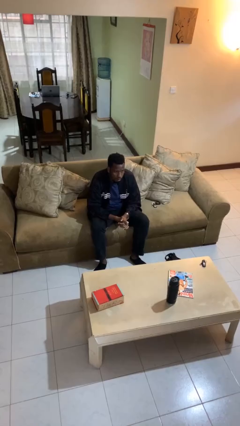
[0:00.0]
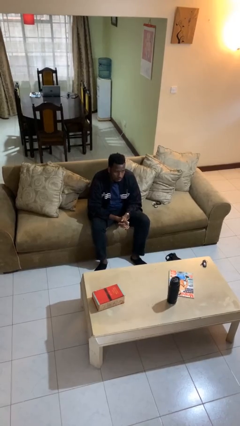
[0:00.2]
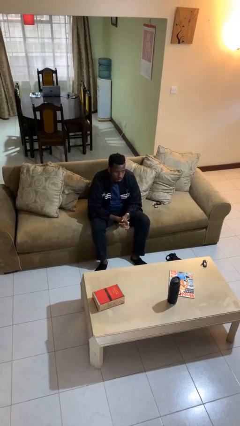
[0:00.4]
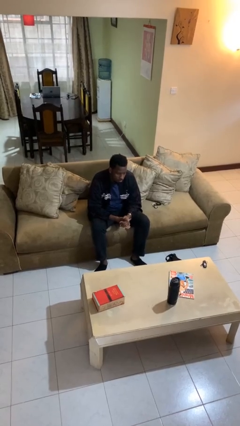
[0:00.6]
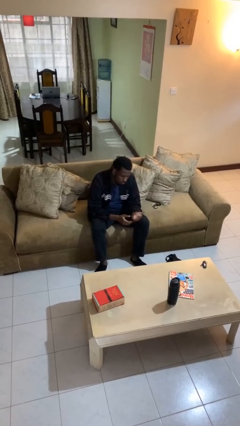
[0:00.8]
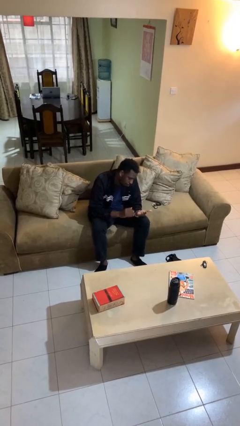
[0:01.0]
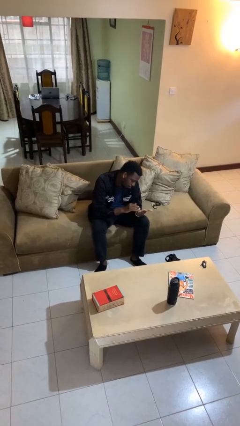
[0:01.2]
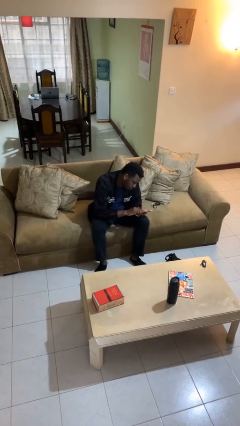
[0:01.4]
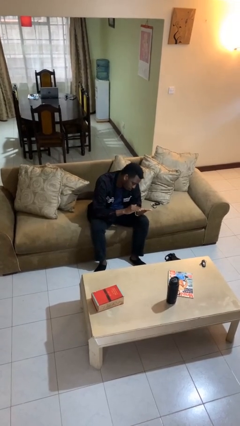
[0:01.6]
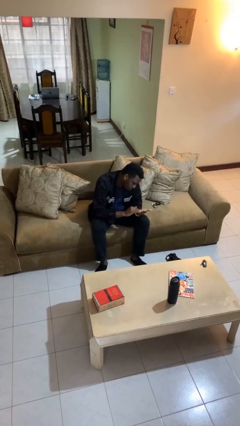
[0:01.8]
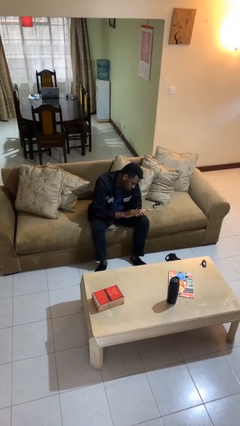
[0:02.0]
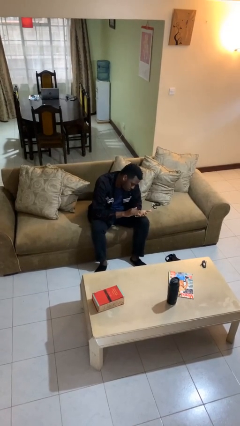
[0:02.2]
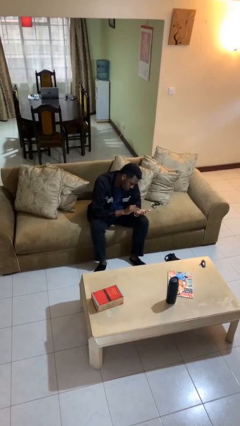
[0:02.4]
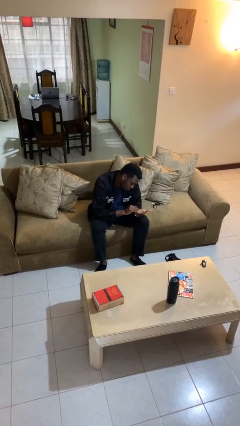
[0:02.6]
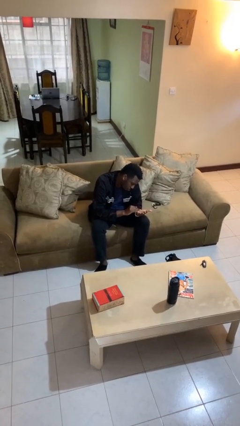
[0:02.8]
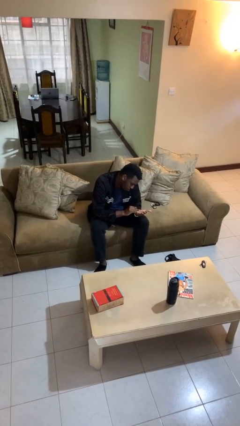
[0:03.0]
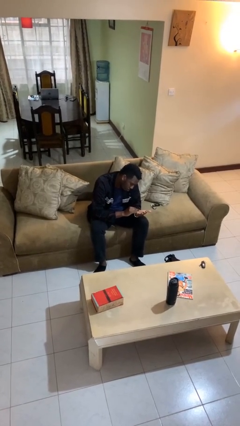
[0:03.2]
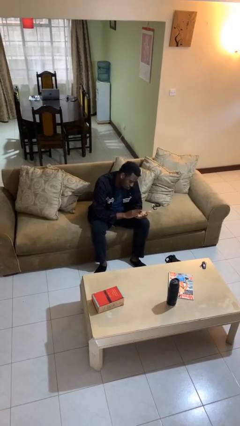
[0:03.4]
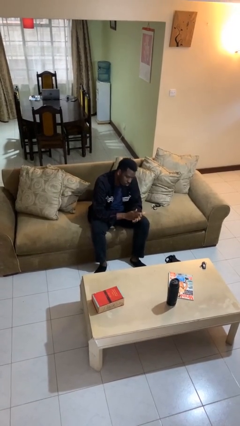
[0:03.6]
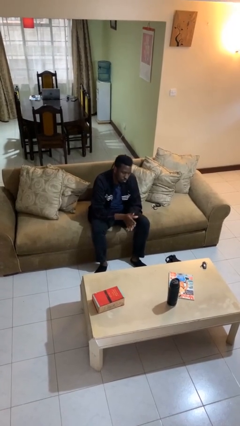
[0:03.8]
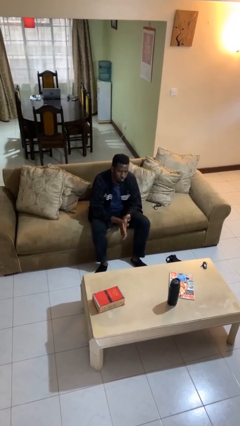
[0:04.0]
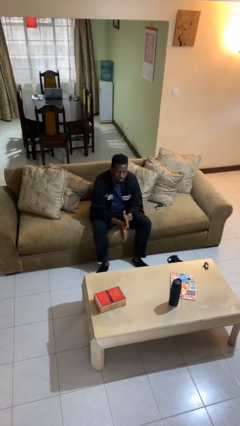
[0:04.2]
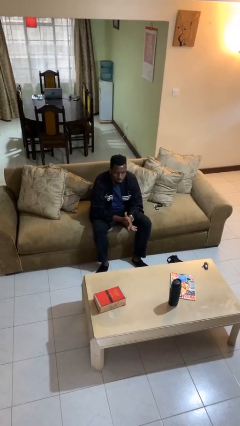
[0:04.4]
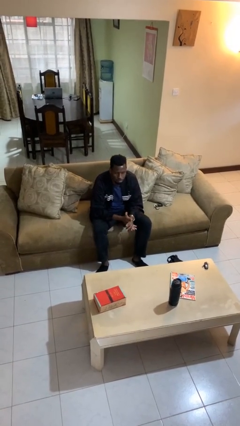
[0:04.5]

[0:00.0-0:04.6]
person looks at hands in lap

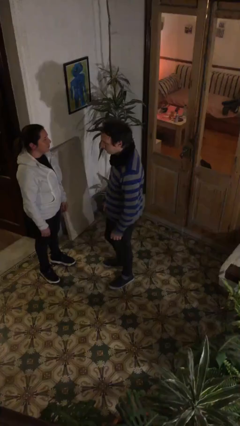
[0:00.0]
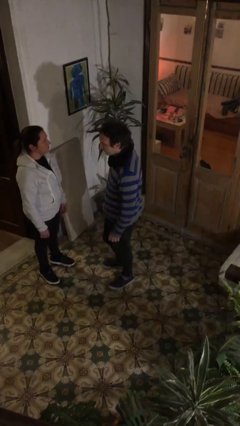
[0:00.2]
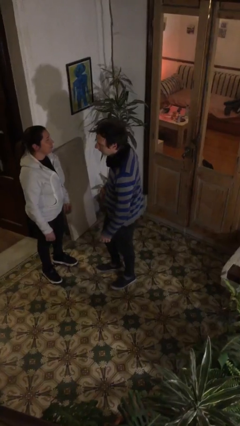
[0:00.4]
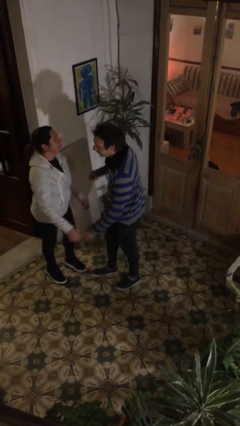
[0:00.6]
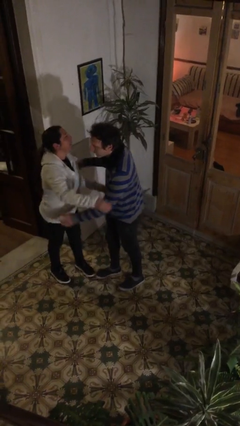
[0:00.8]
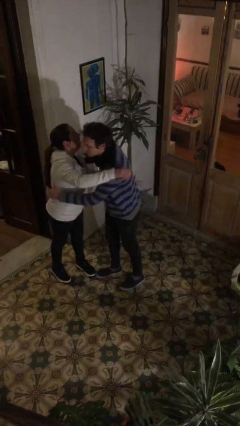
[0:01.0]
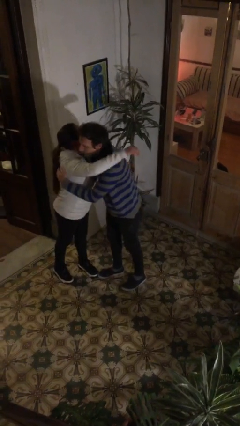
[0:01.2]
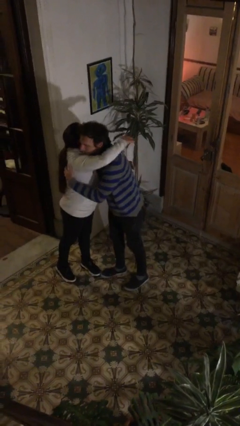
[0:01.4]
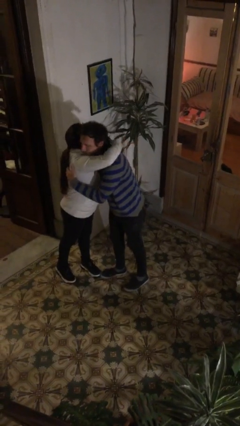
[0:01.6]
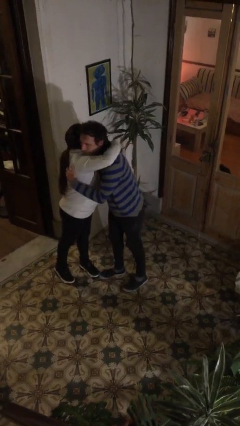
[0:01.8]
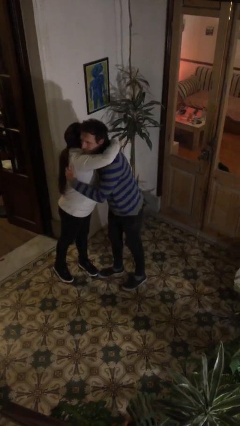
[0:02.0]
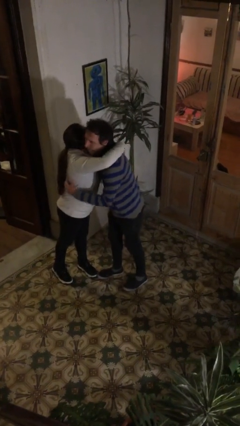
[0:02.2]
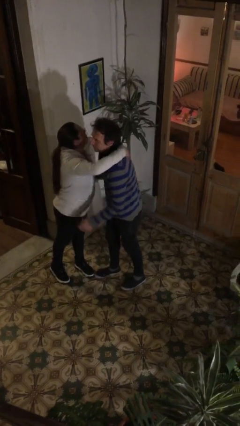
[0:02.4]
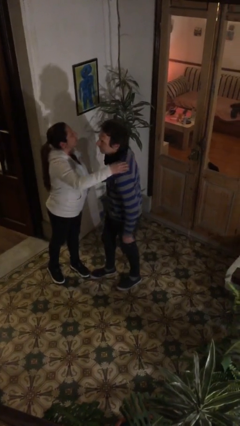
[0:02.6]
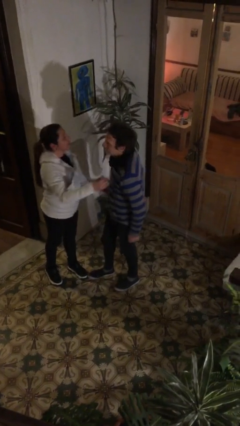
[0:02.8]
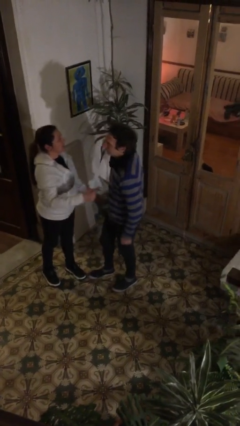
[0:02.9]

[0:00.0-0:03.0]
person embraces person

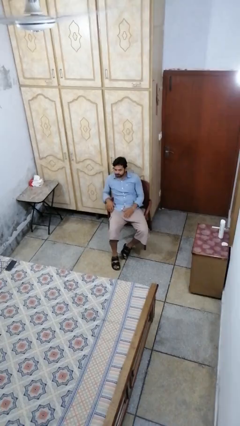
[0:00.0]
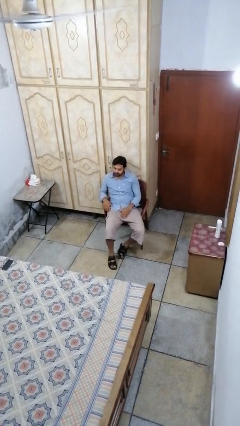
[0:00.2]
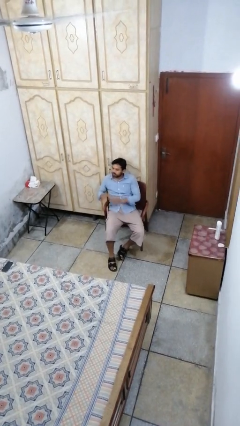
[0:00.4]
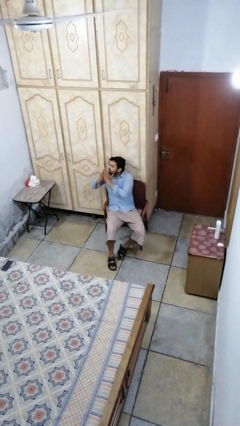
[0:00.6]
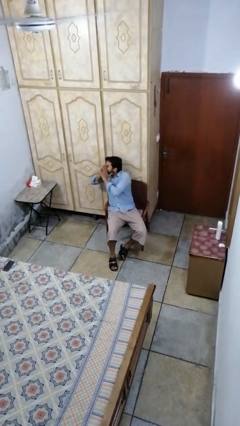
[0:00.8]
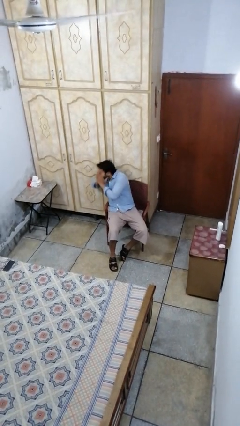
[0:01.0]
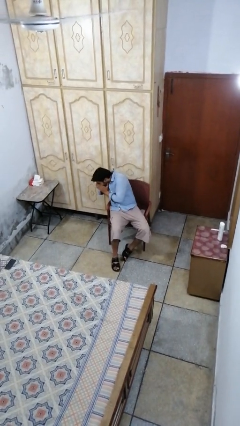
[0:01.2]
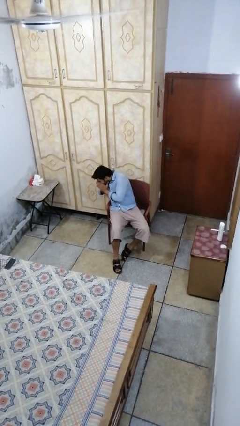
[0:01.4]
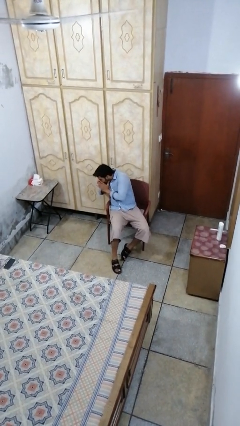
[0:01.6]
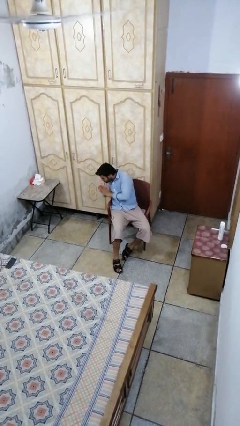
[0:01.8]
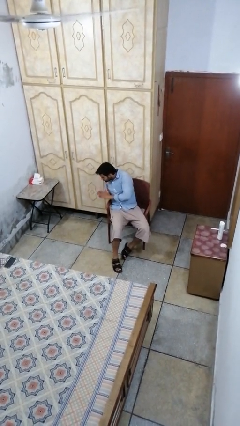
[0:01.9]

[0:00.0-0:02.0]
person sneezes into hand

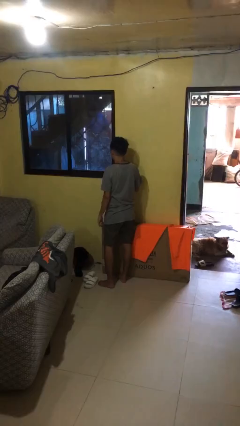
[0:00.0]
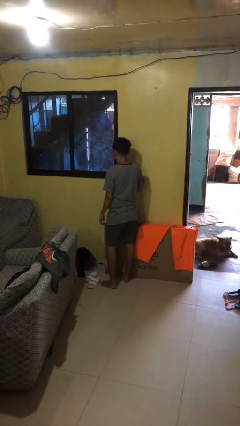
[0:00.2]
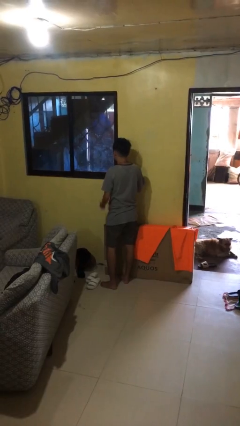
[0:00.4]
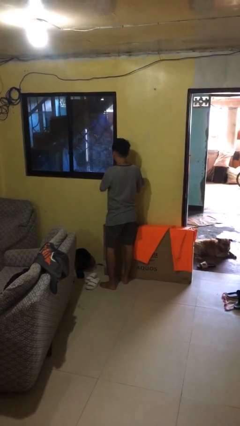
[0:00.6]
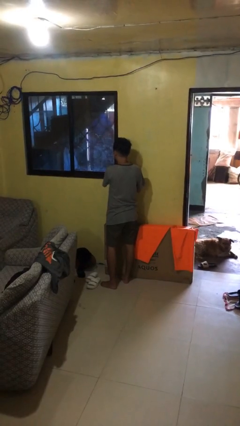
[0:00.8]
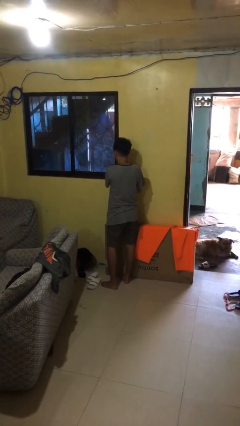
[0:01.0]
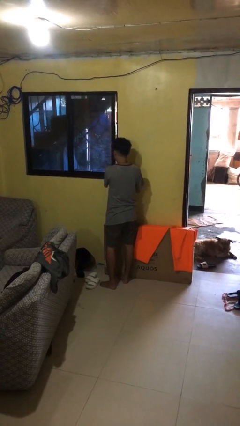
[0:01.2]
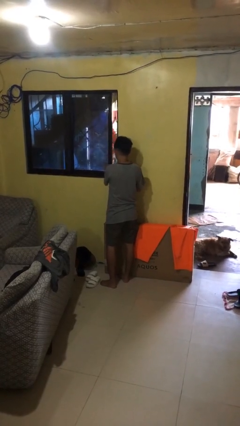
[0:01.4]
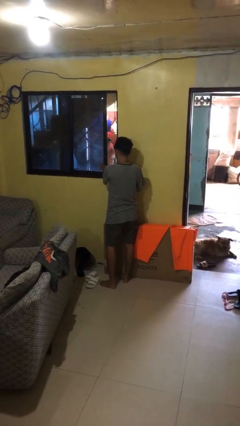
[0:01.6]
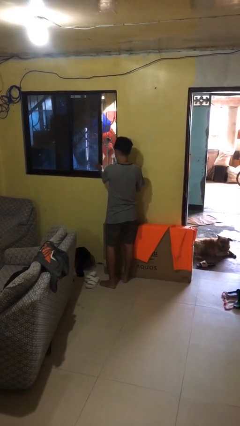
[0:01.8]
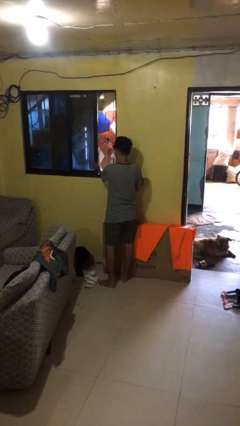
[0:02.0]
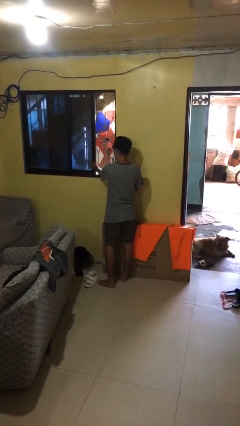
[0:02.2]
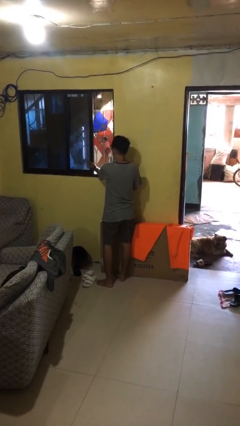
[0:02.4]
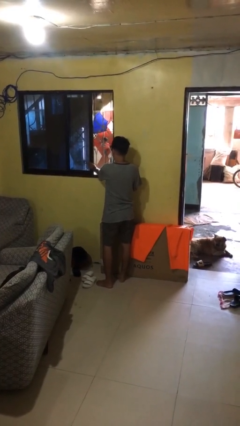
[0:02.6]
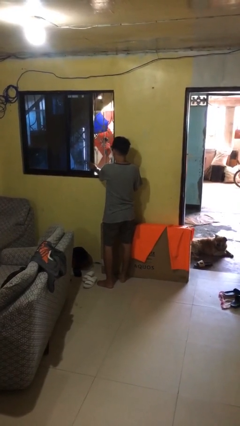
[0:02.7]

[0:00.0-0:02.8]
person opens home window

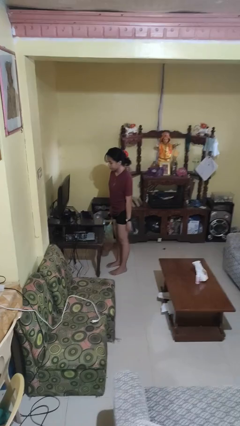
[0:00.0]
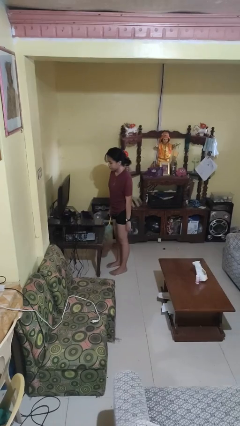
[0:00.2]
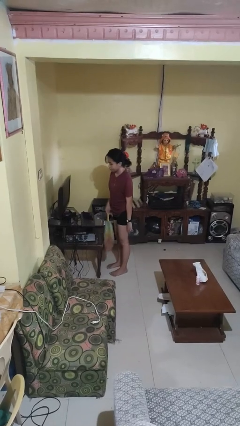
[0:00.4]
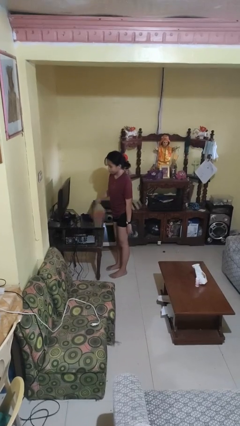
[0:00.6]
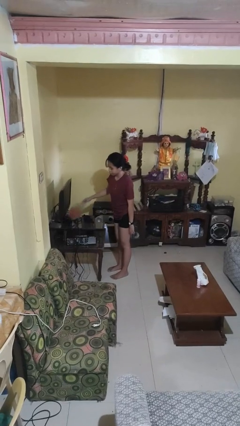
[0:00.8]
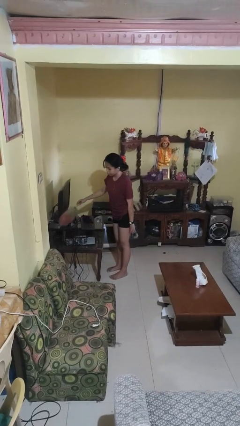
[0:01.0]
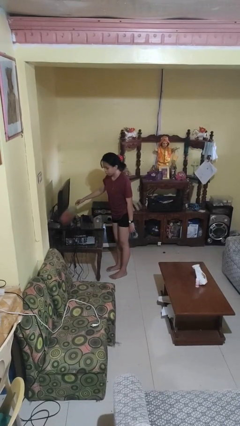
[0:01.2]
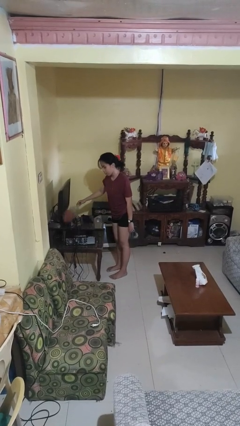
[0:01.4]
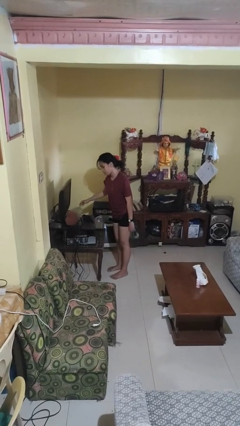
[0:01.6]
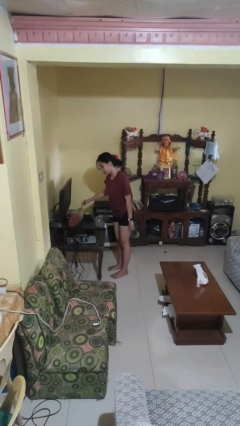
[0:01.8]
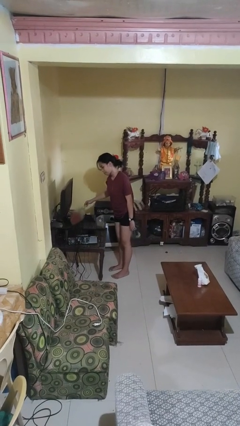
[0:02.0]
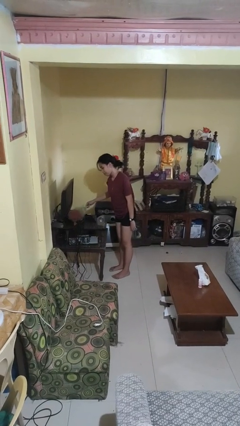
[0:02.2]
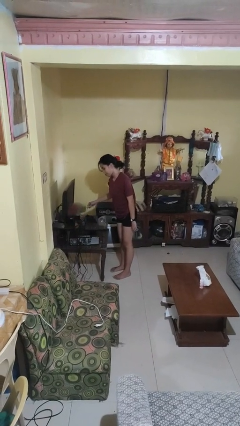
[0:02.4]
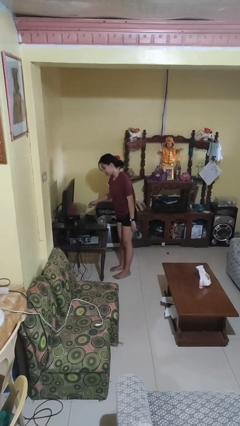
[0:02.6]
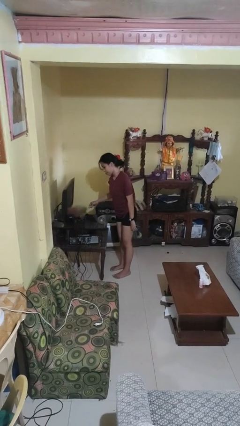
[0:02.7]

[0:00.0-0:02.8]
person dusts furniture

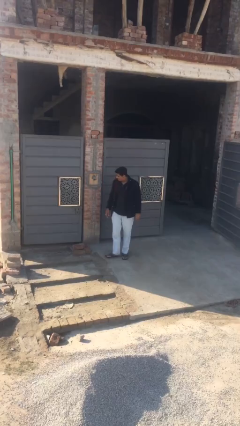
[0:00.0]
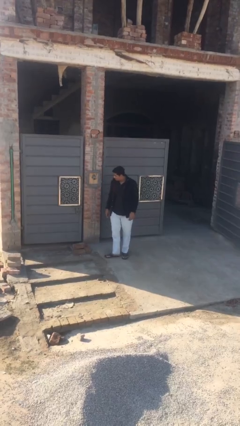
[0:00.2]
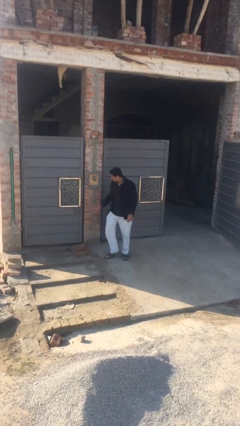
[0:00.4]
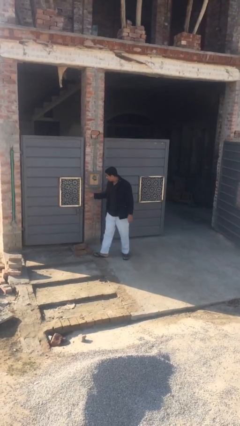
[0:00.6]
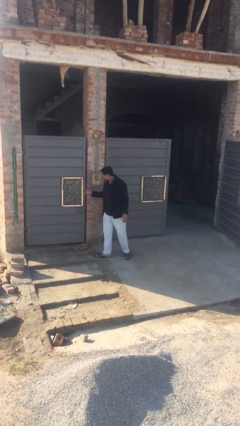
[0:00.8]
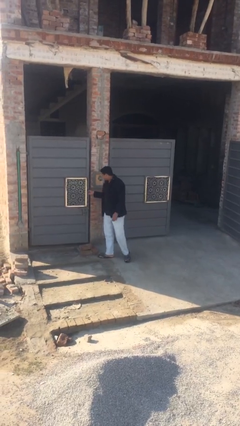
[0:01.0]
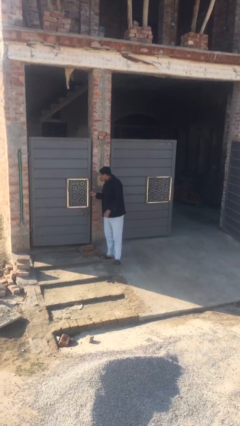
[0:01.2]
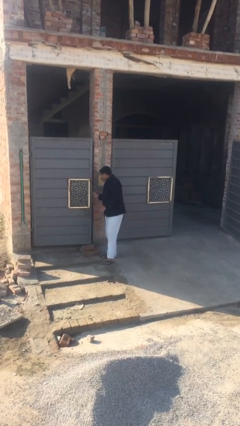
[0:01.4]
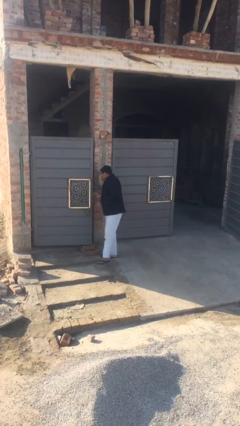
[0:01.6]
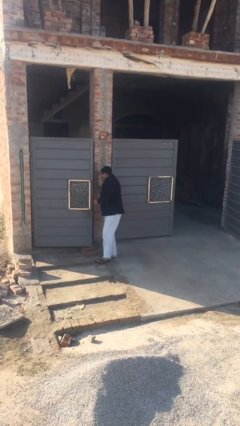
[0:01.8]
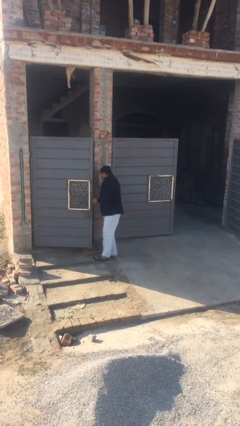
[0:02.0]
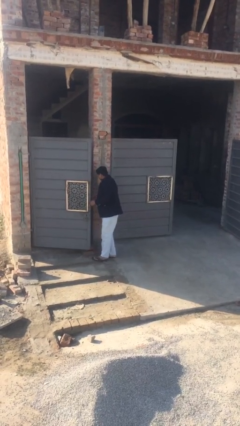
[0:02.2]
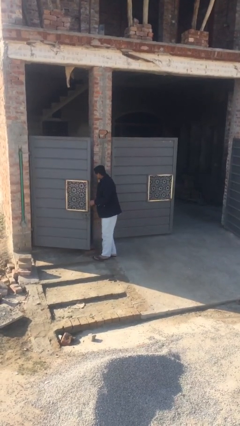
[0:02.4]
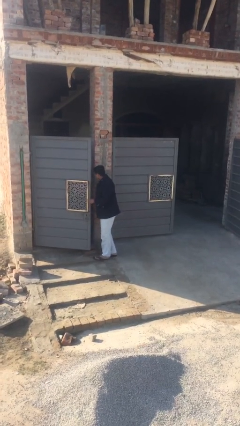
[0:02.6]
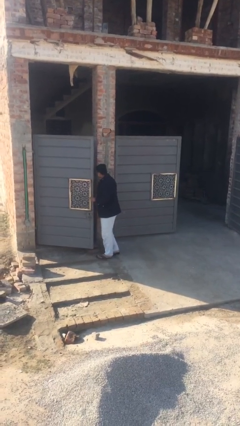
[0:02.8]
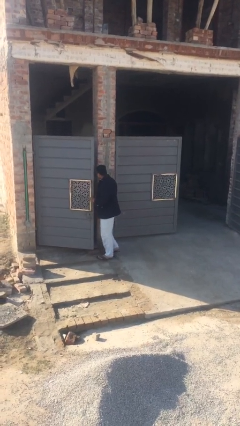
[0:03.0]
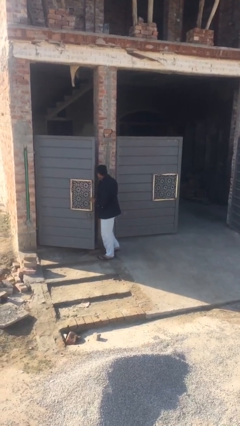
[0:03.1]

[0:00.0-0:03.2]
person opens facility door
